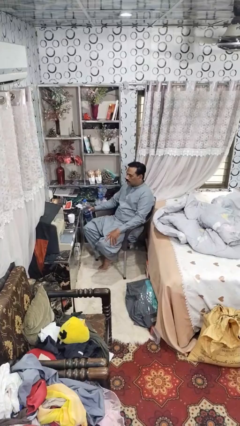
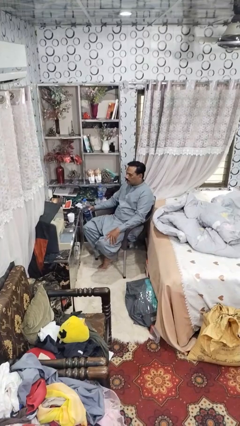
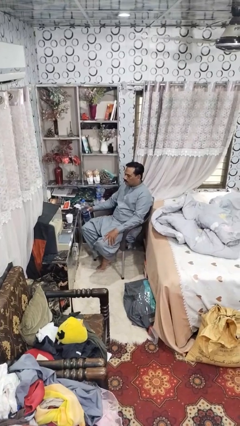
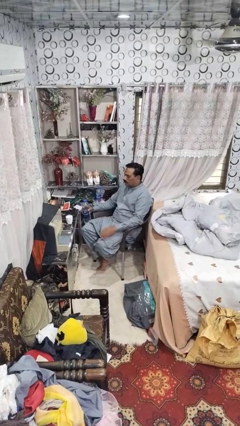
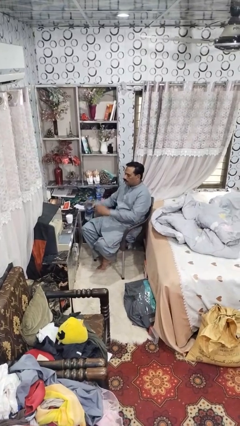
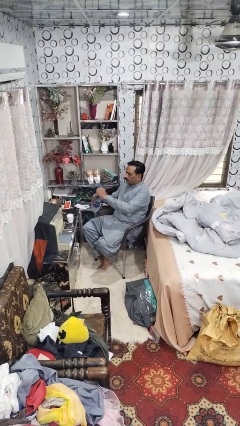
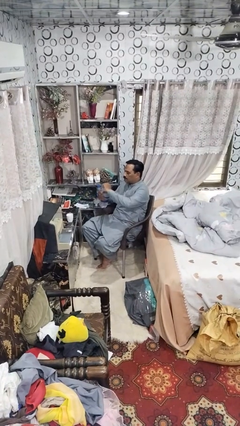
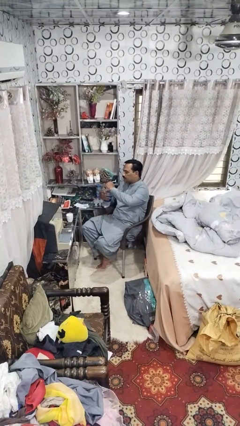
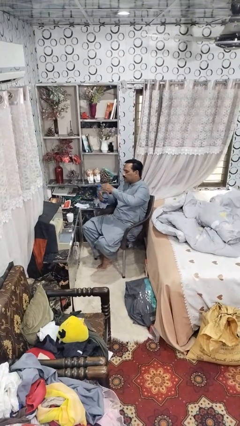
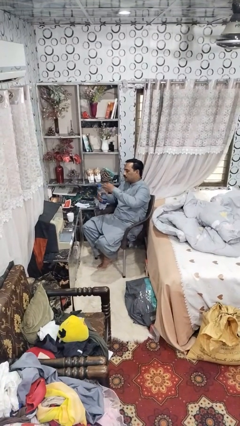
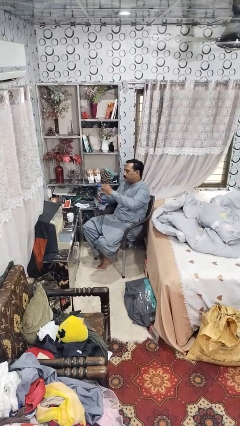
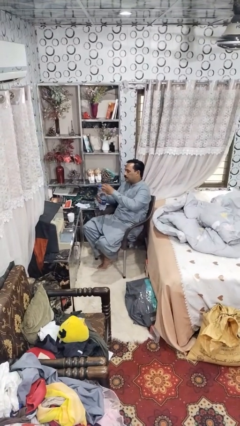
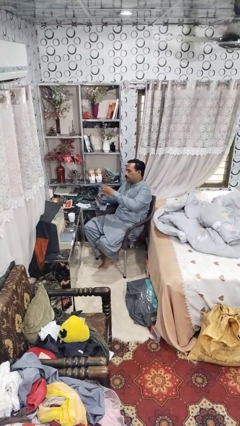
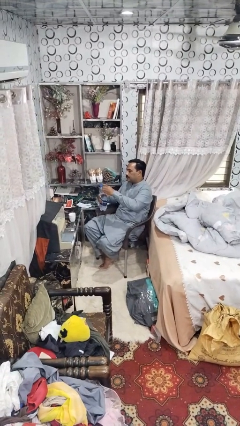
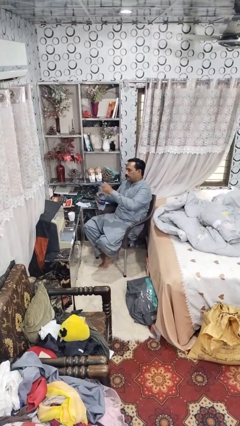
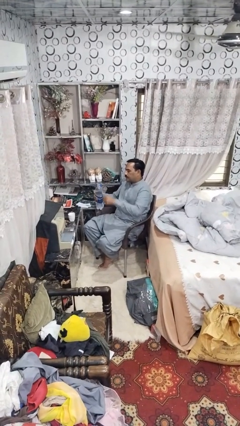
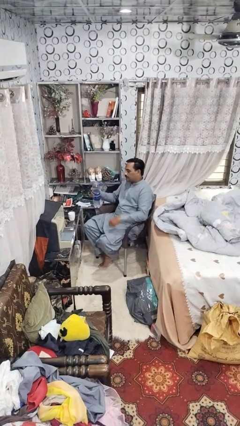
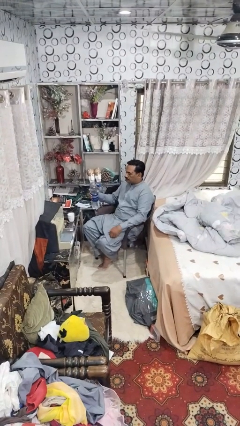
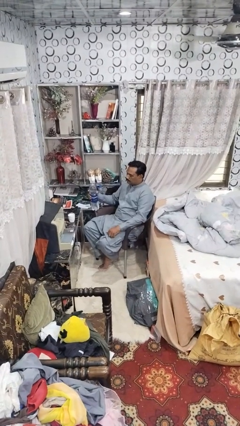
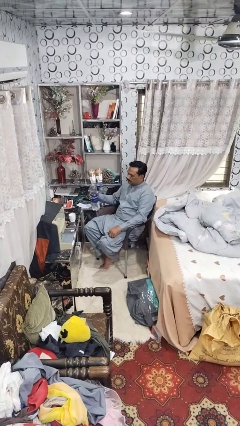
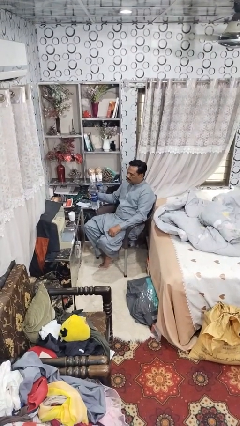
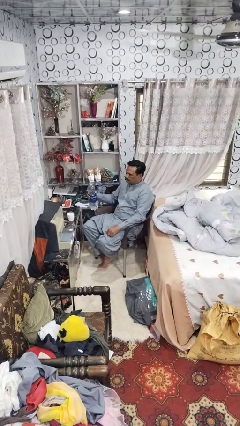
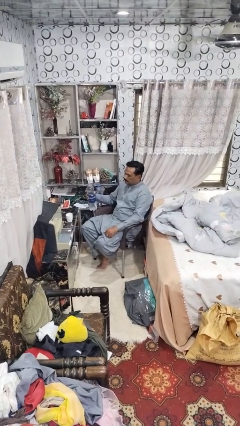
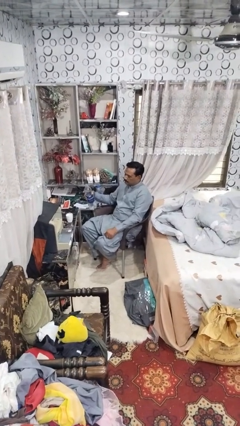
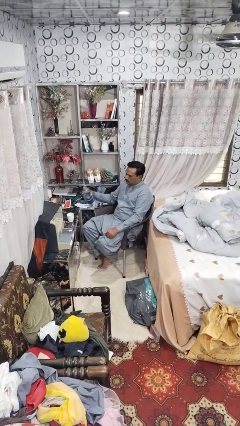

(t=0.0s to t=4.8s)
person unscrews lid from bottle

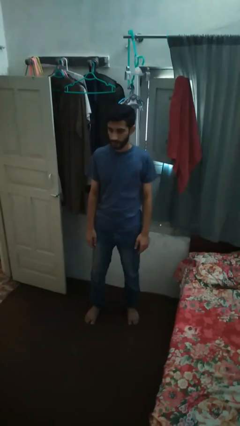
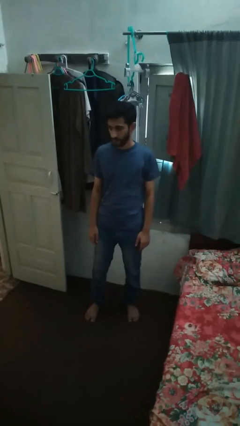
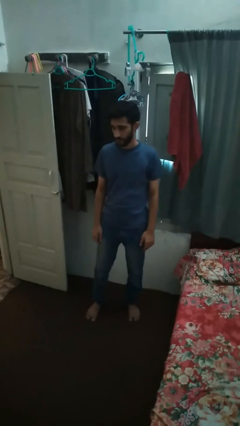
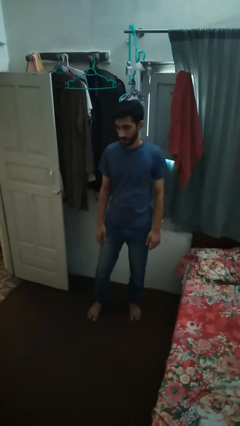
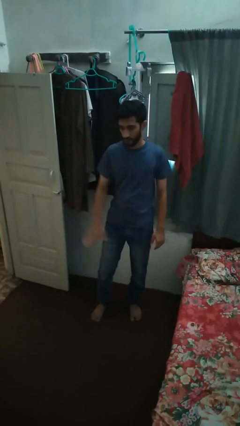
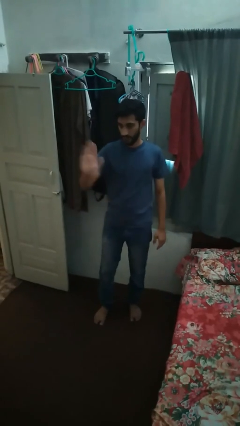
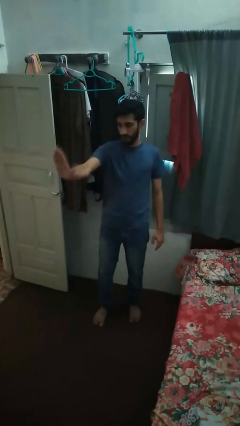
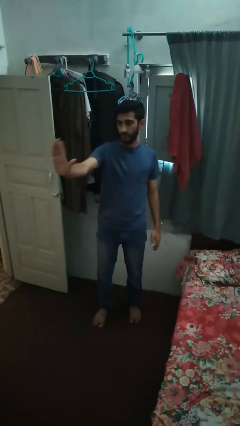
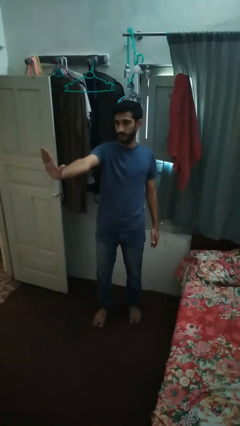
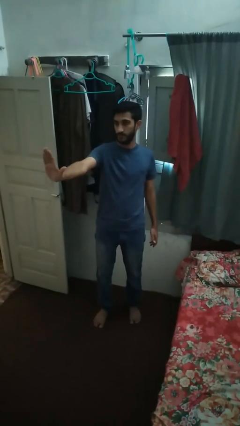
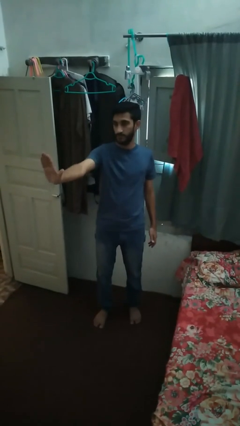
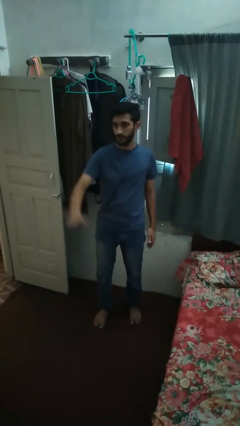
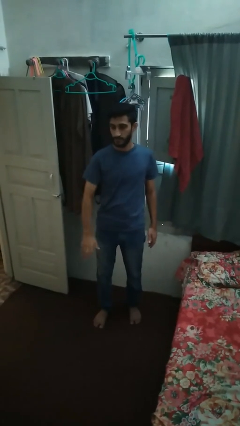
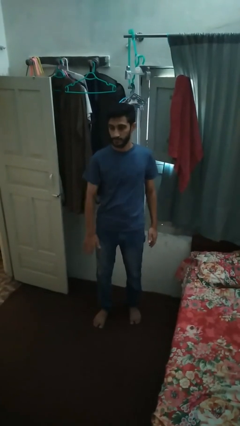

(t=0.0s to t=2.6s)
person gestures stop

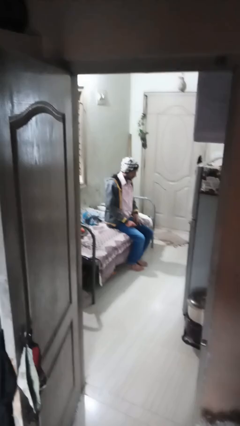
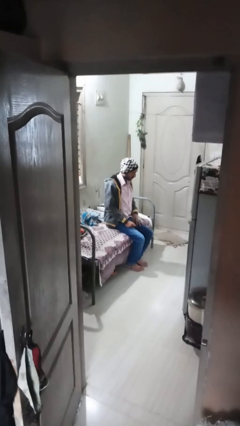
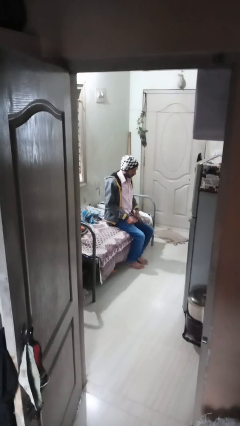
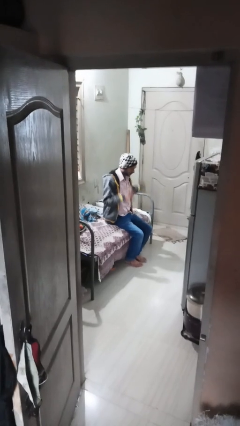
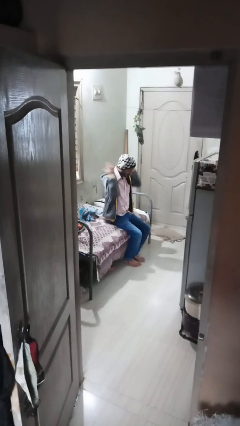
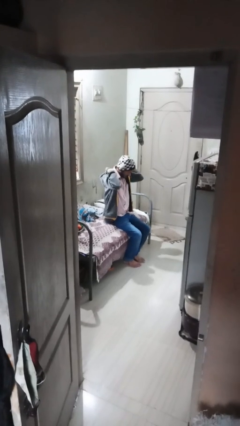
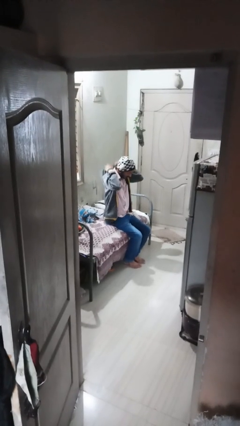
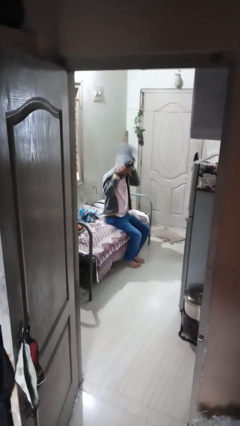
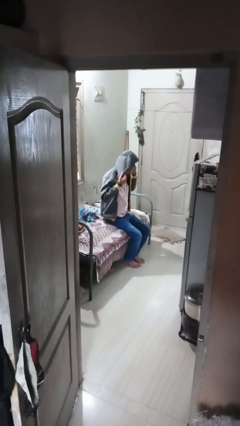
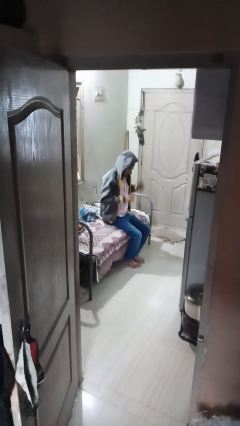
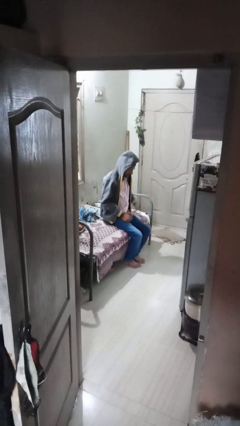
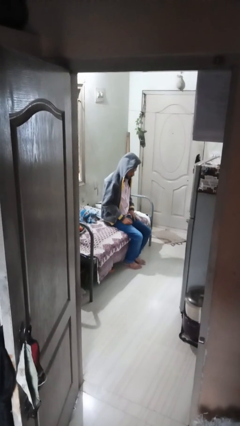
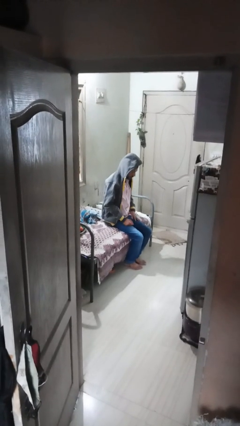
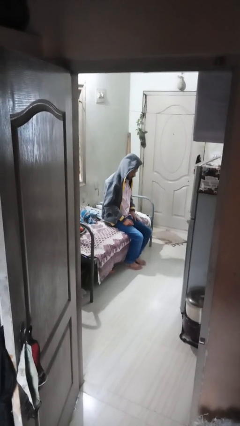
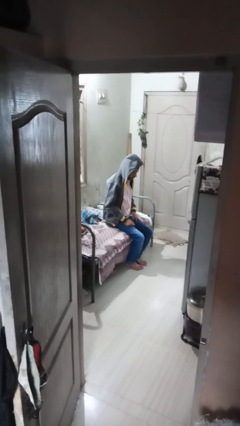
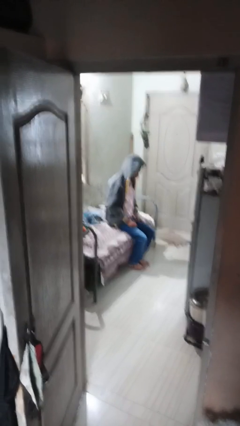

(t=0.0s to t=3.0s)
person puts on hoodie

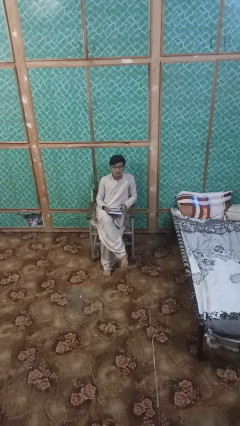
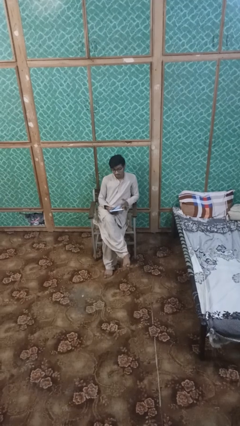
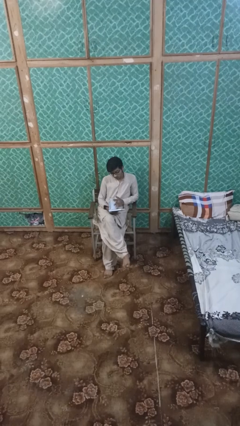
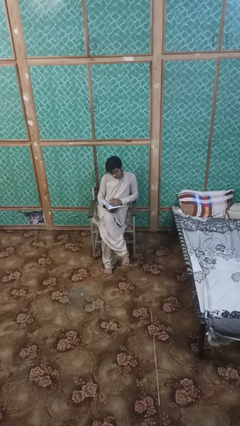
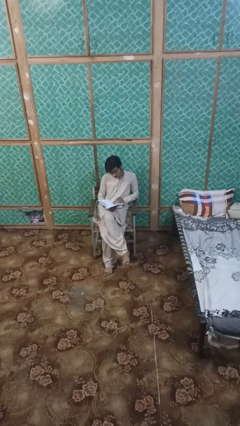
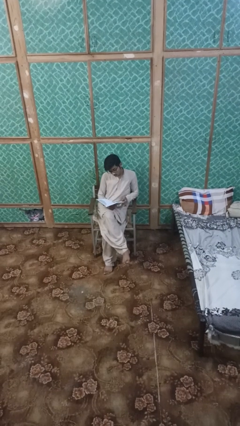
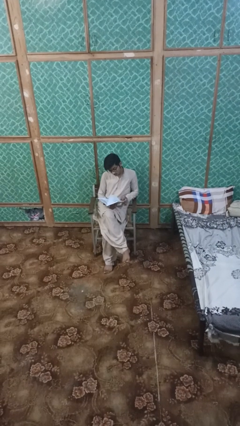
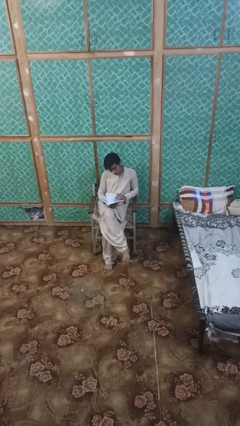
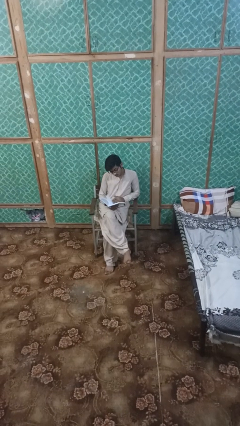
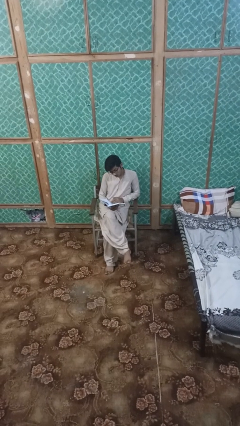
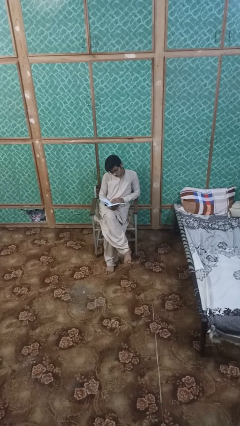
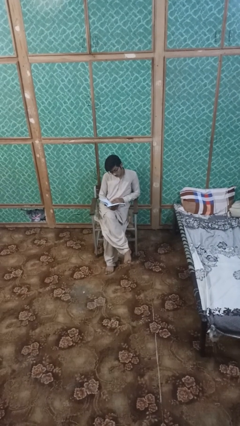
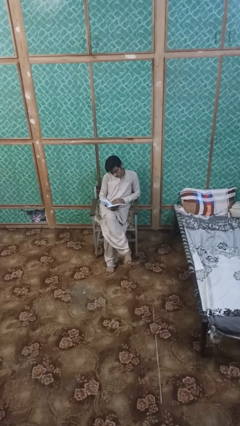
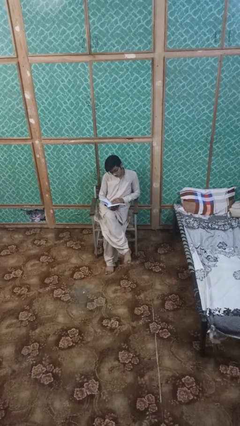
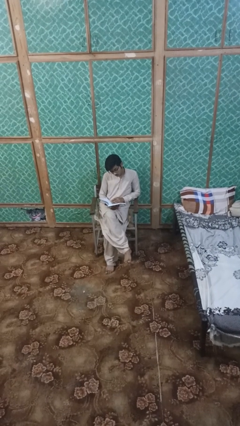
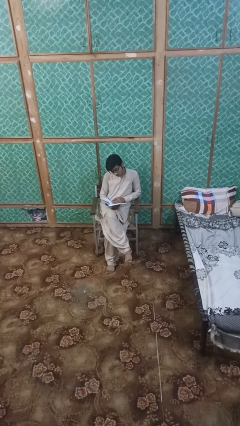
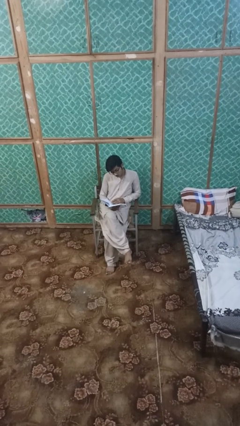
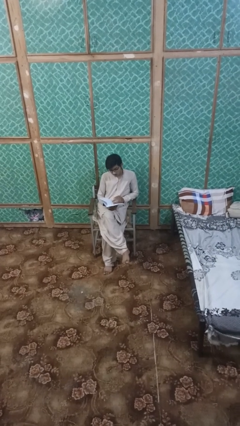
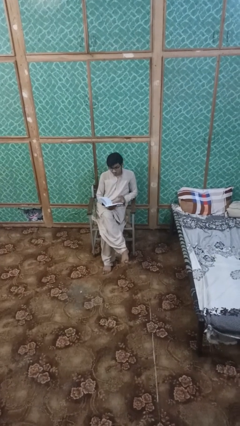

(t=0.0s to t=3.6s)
person reads magazine

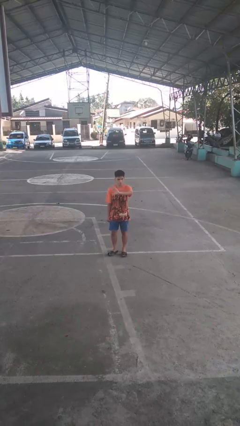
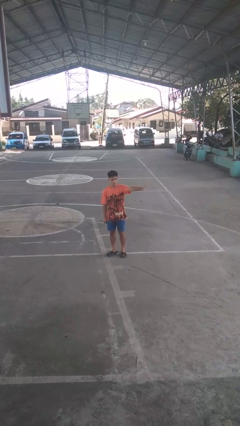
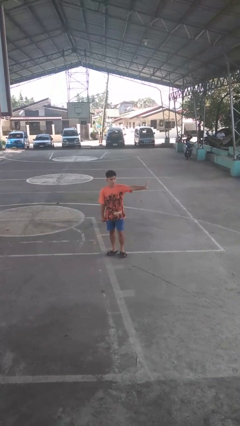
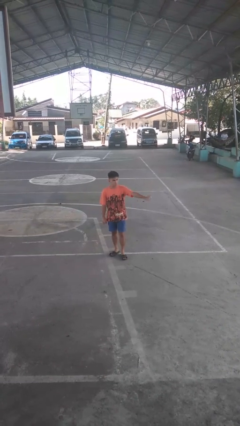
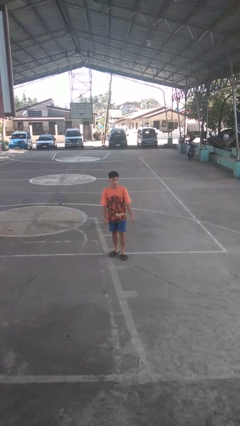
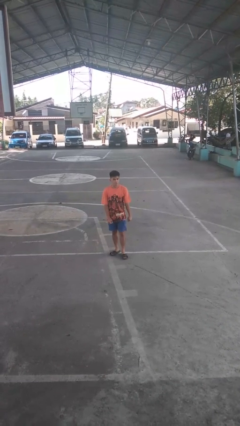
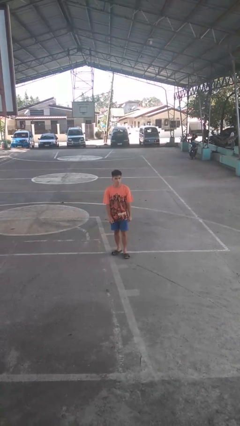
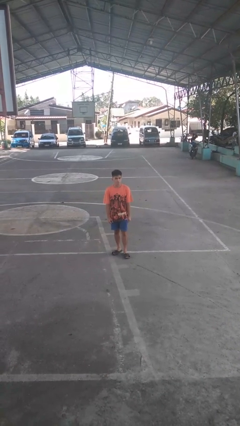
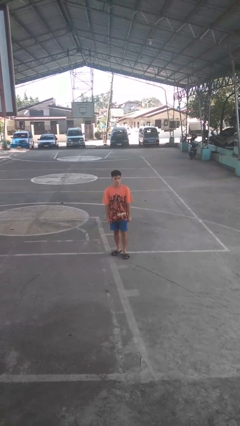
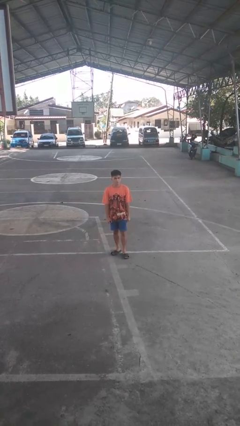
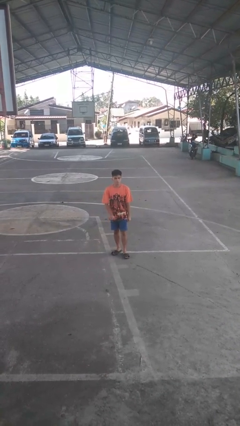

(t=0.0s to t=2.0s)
person gestures swipe left

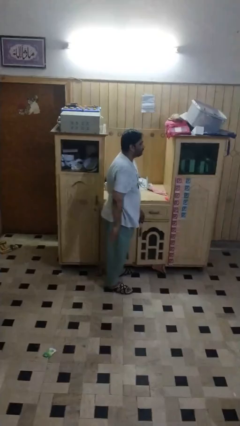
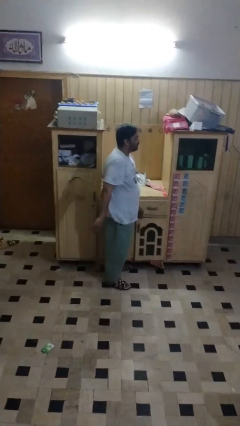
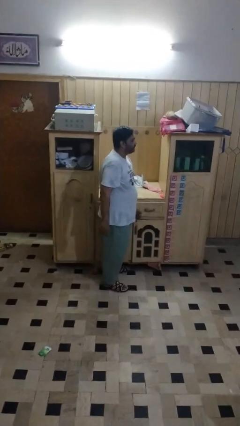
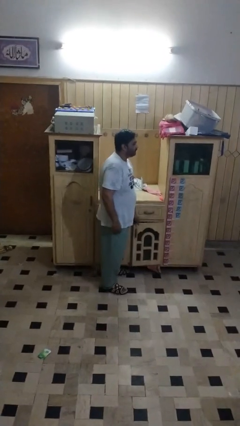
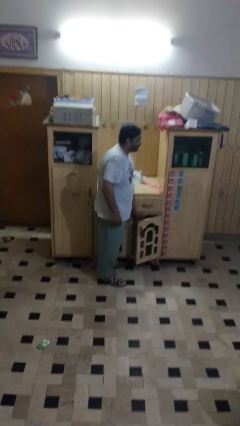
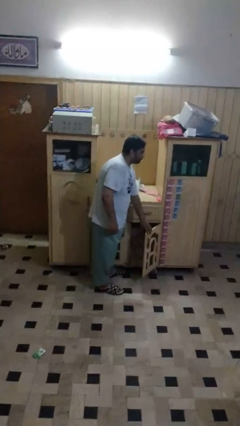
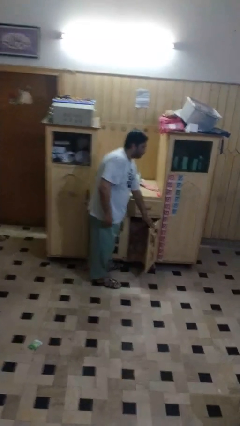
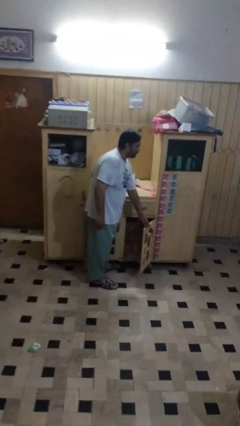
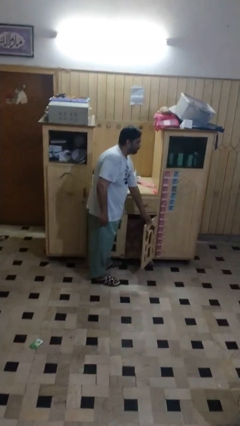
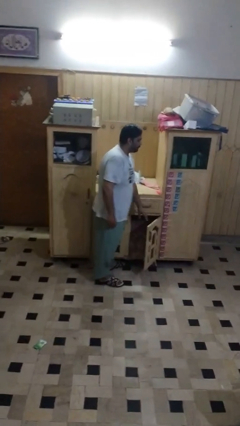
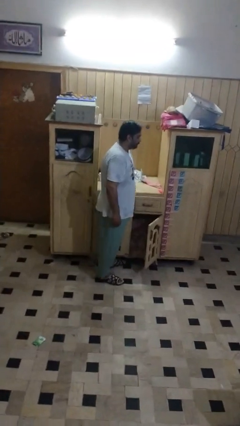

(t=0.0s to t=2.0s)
person closes cabinet
